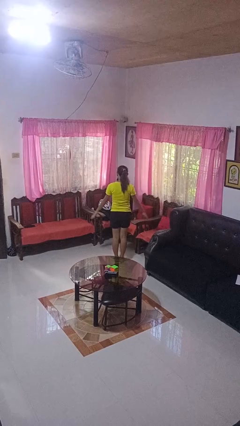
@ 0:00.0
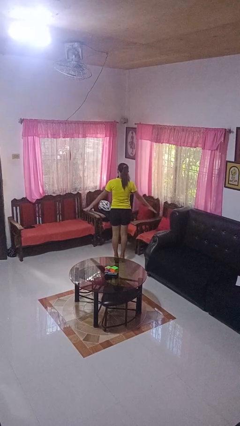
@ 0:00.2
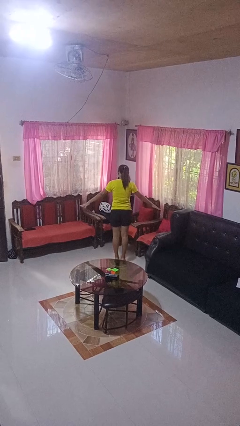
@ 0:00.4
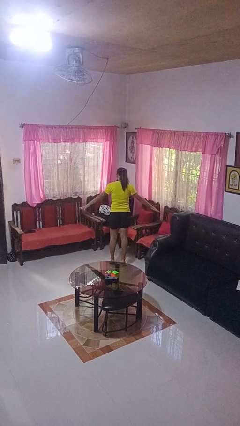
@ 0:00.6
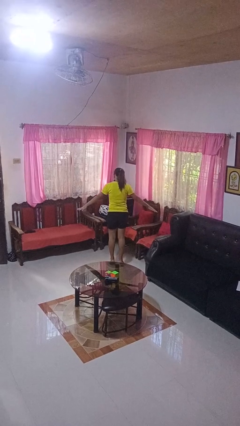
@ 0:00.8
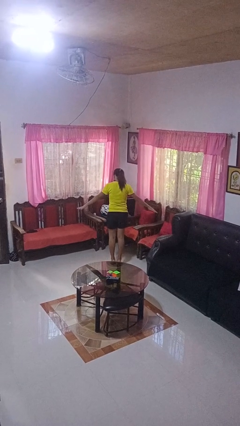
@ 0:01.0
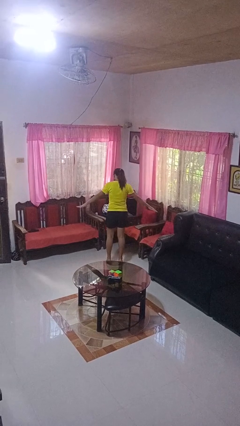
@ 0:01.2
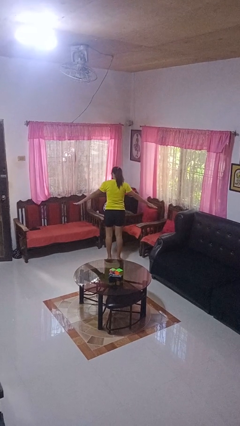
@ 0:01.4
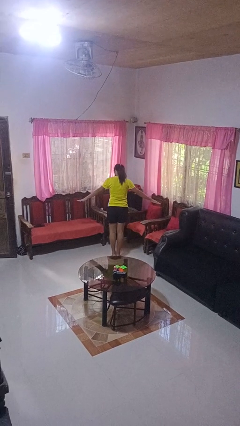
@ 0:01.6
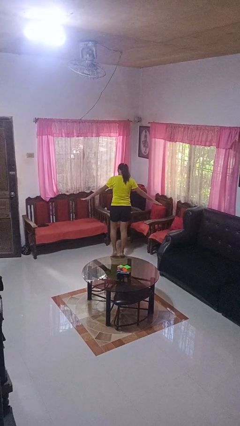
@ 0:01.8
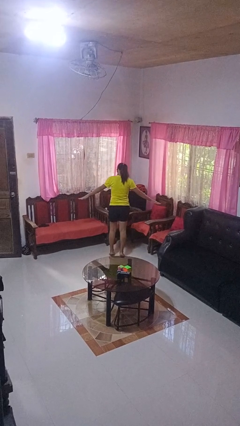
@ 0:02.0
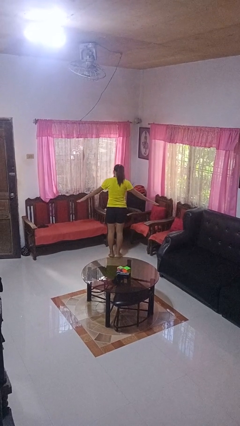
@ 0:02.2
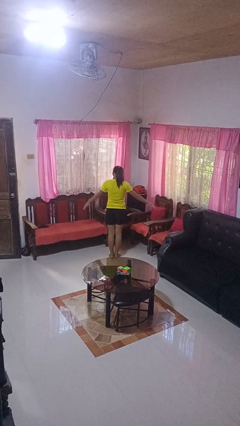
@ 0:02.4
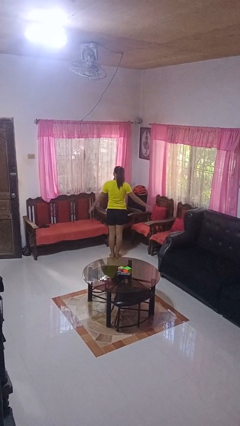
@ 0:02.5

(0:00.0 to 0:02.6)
person walks tiptoe

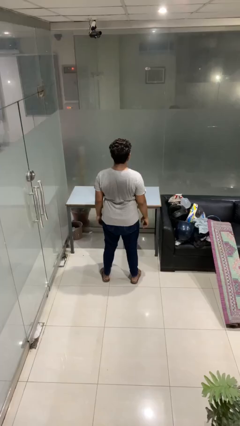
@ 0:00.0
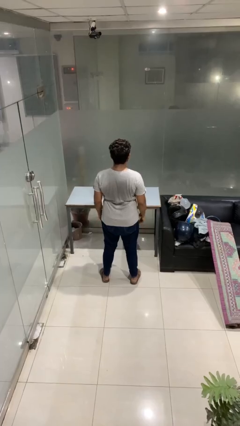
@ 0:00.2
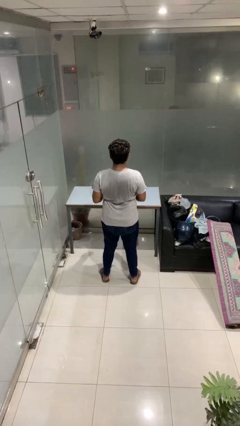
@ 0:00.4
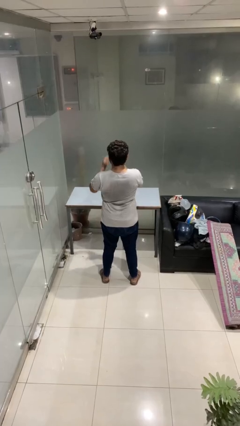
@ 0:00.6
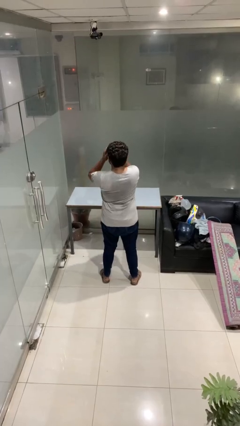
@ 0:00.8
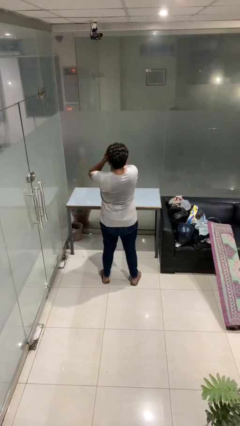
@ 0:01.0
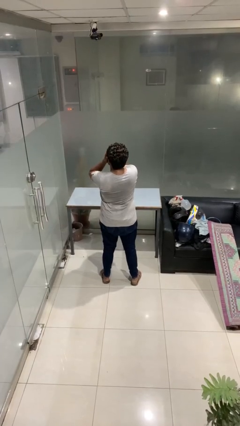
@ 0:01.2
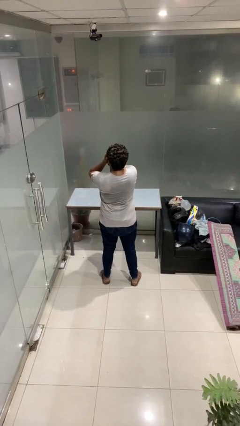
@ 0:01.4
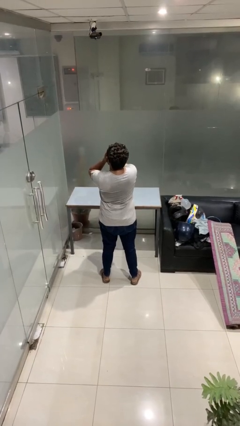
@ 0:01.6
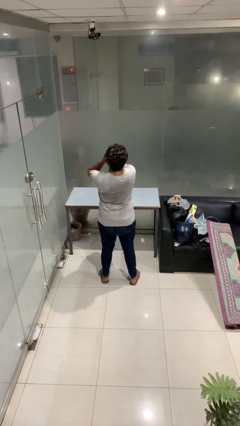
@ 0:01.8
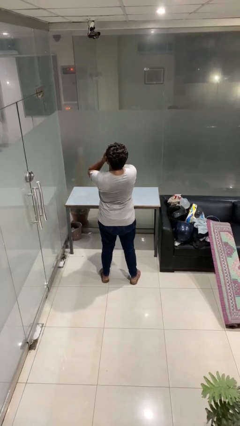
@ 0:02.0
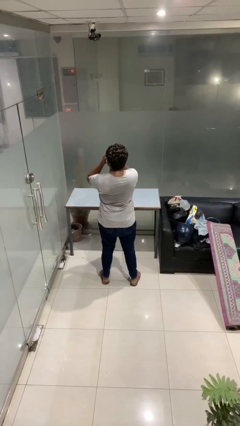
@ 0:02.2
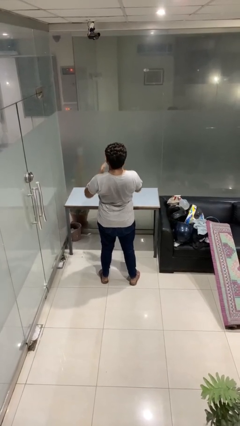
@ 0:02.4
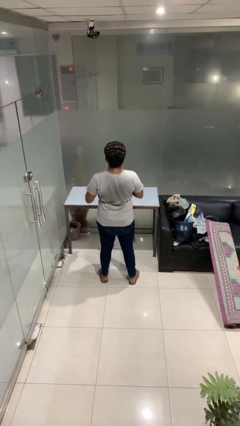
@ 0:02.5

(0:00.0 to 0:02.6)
person covers face with hands

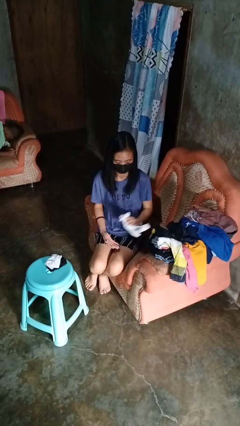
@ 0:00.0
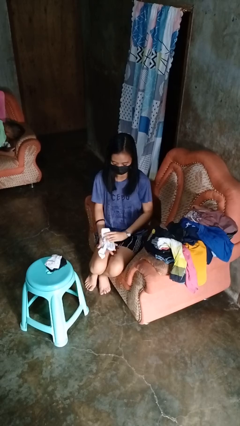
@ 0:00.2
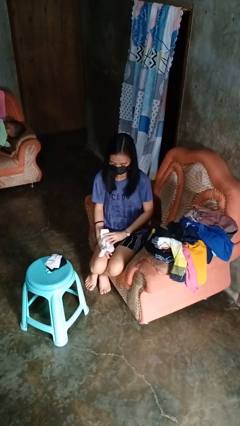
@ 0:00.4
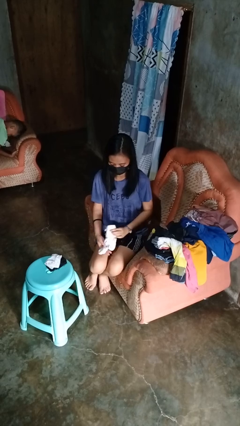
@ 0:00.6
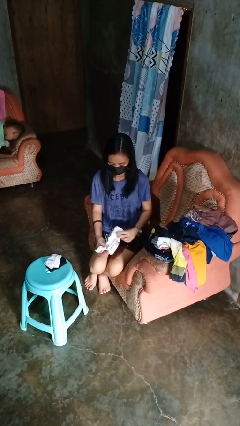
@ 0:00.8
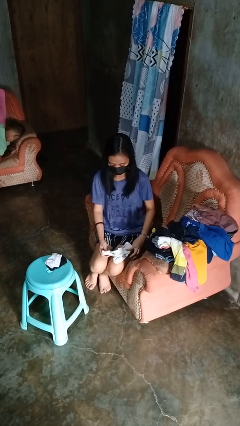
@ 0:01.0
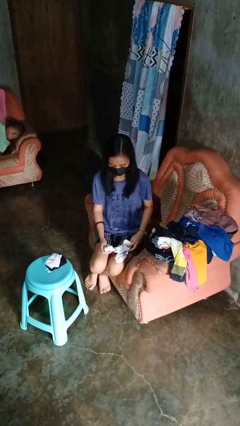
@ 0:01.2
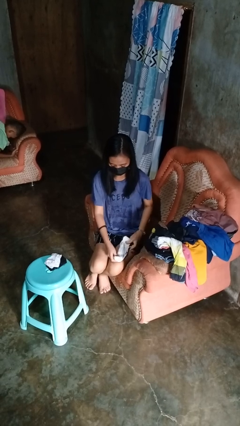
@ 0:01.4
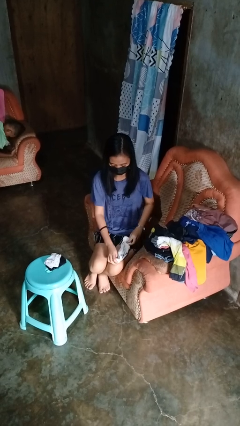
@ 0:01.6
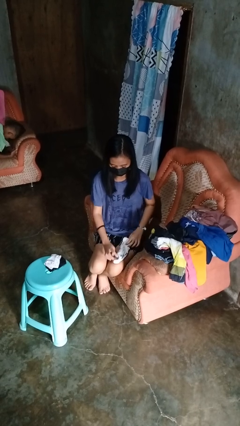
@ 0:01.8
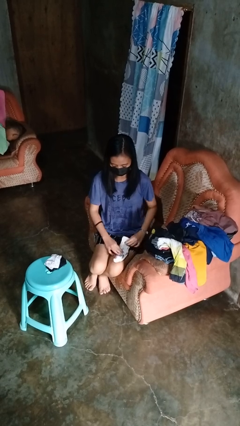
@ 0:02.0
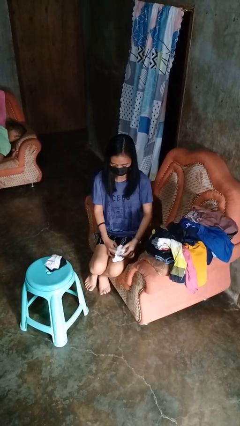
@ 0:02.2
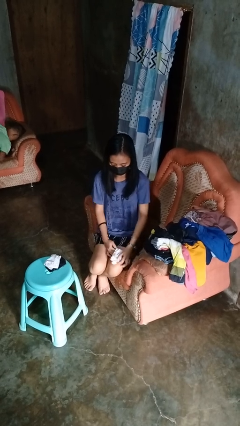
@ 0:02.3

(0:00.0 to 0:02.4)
person folds socks

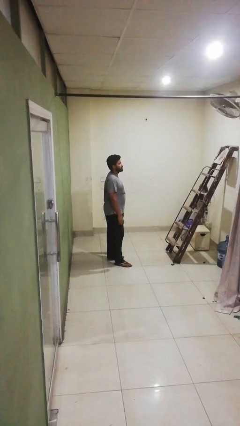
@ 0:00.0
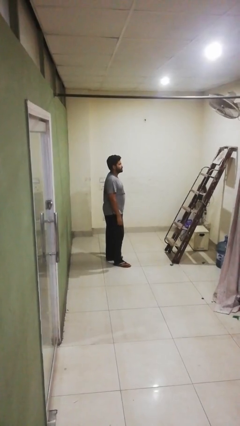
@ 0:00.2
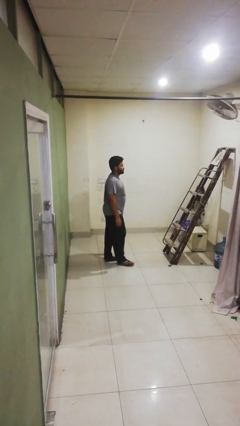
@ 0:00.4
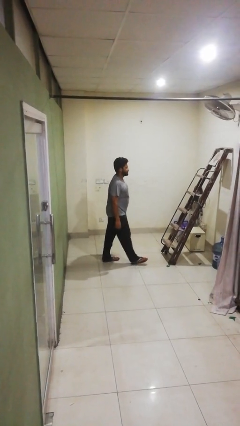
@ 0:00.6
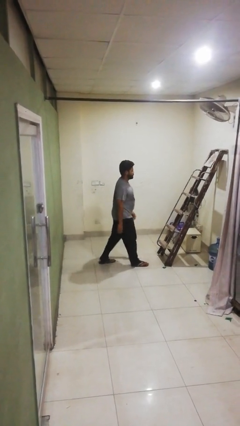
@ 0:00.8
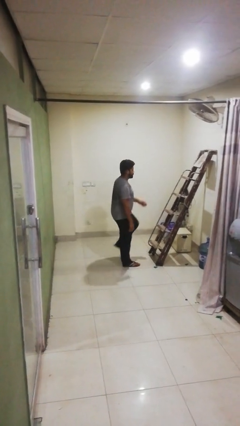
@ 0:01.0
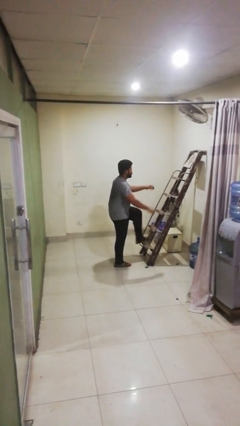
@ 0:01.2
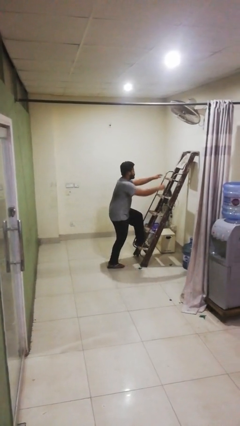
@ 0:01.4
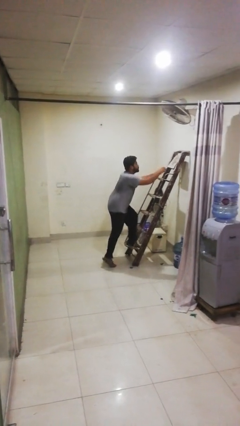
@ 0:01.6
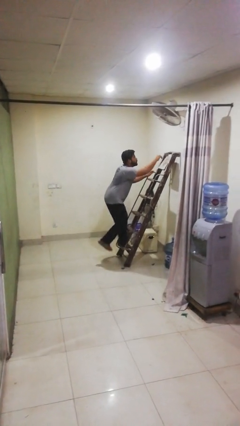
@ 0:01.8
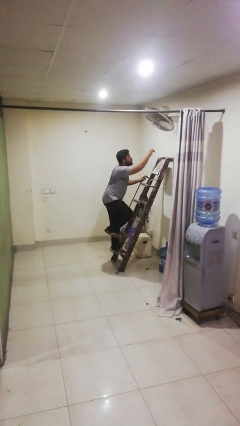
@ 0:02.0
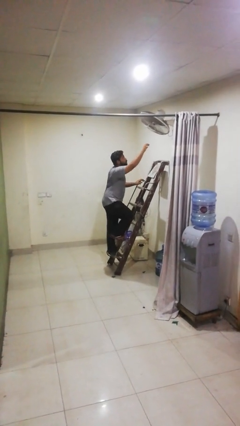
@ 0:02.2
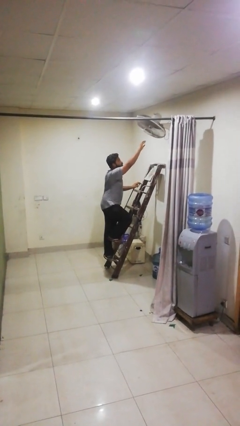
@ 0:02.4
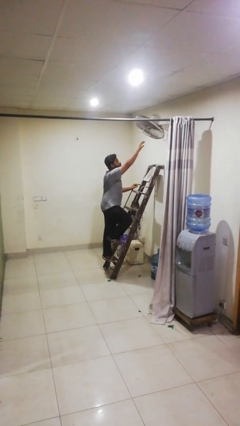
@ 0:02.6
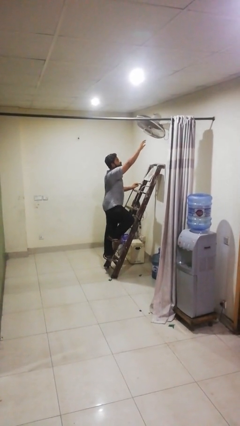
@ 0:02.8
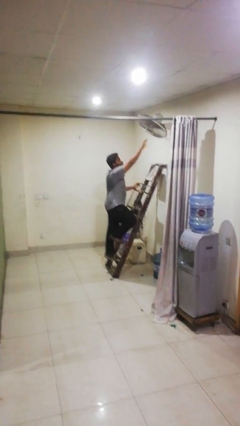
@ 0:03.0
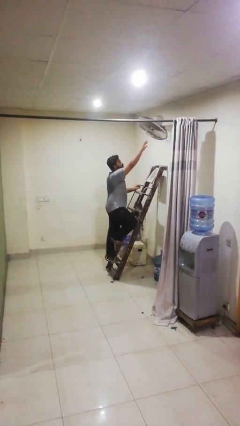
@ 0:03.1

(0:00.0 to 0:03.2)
person climbs up ladder

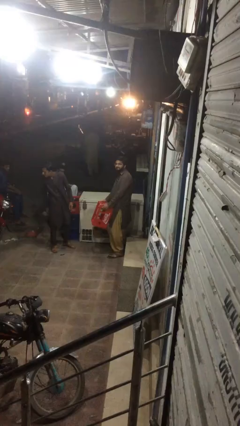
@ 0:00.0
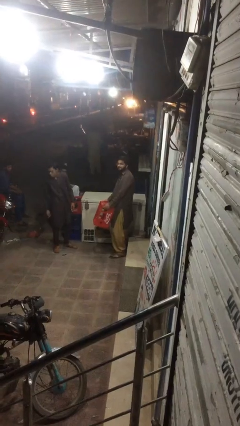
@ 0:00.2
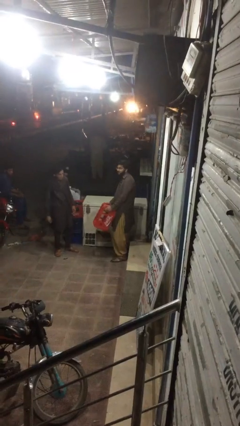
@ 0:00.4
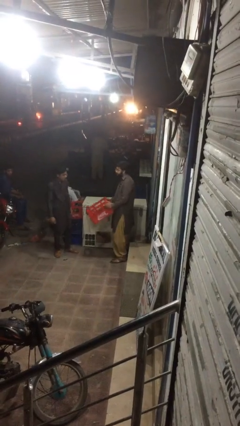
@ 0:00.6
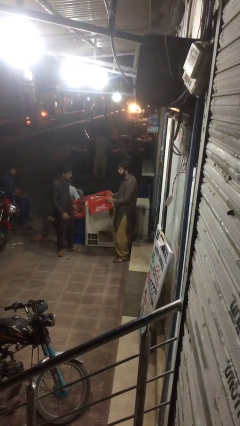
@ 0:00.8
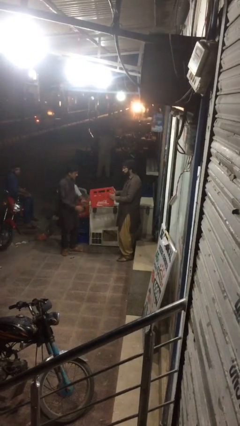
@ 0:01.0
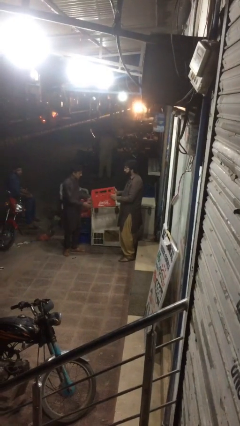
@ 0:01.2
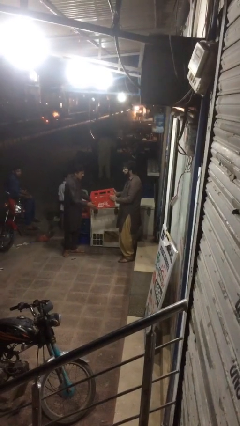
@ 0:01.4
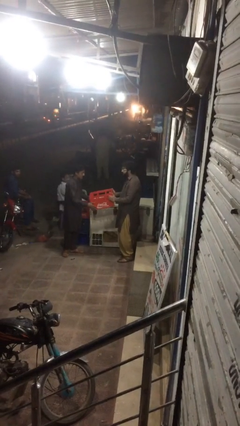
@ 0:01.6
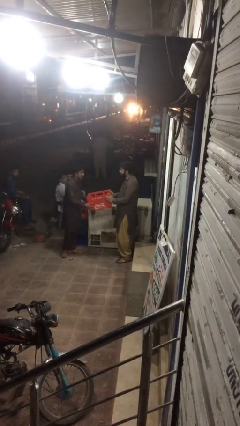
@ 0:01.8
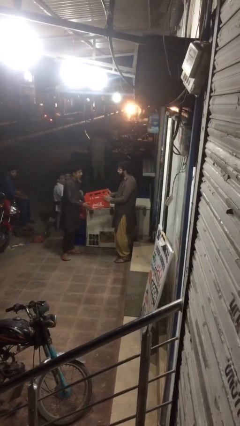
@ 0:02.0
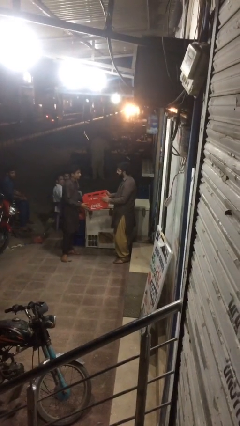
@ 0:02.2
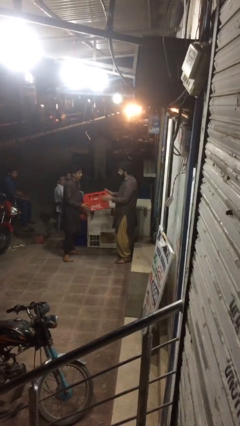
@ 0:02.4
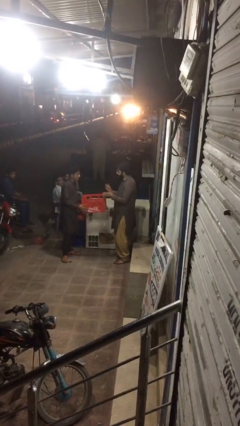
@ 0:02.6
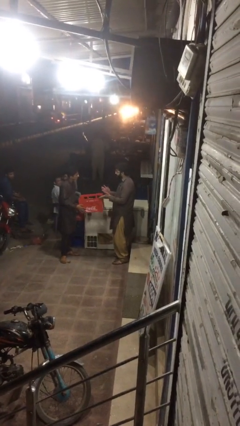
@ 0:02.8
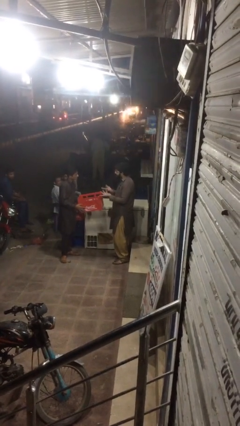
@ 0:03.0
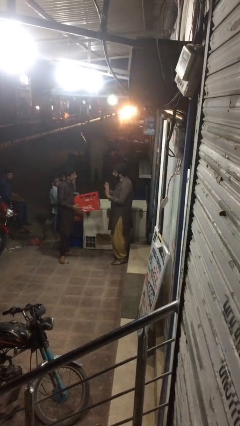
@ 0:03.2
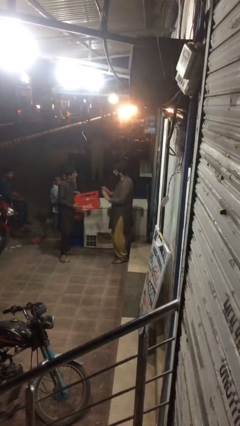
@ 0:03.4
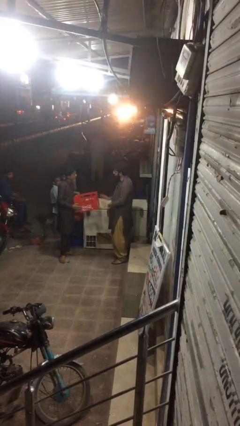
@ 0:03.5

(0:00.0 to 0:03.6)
person transfers object to person

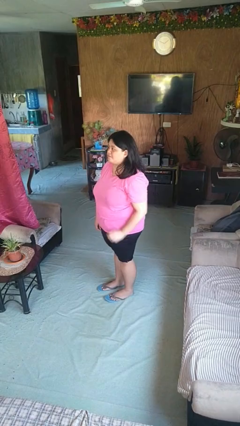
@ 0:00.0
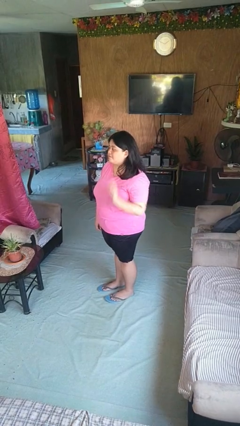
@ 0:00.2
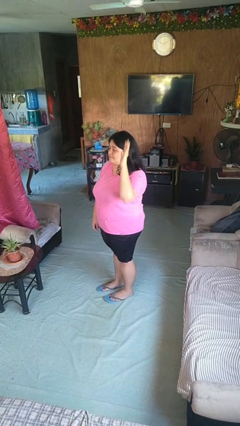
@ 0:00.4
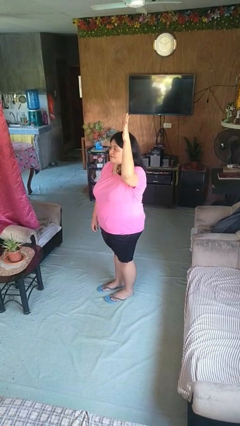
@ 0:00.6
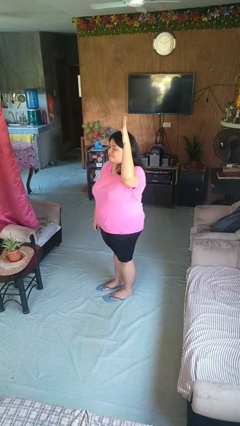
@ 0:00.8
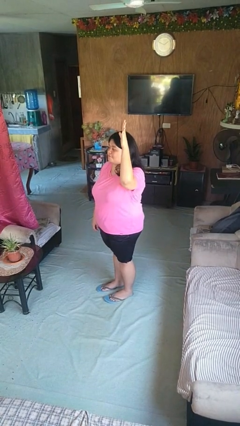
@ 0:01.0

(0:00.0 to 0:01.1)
person gestures raise hand

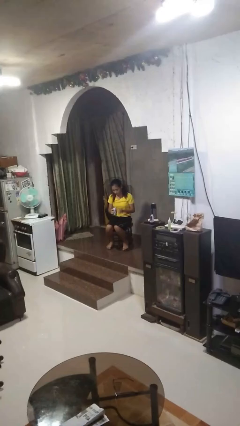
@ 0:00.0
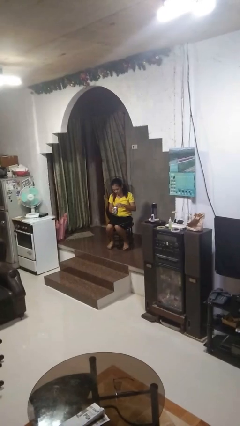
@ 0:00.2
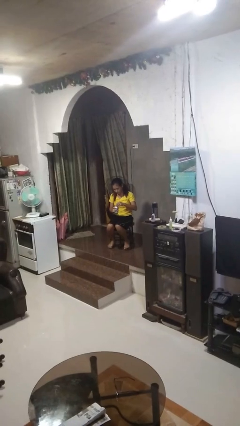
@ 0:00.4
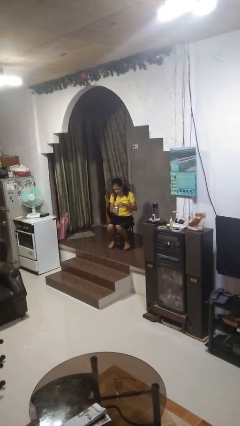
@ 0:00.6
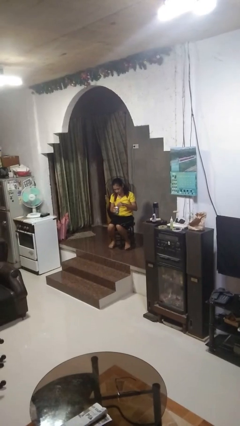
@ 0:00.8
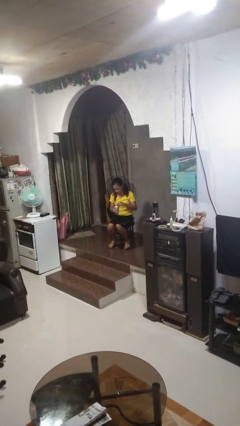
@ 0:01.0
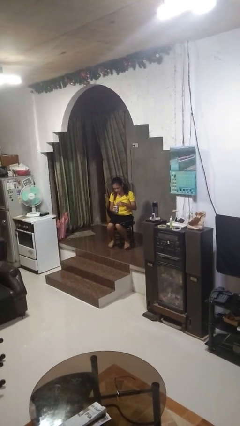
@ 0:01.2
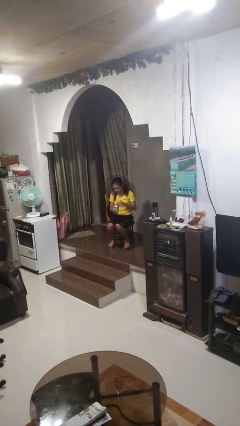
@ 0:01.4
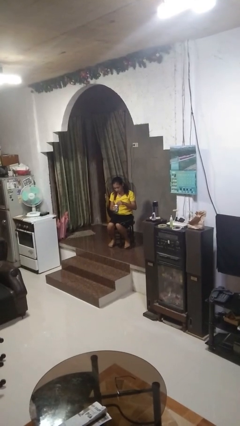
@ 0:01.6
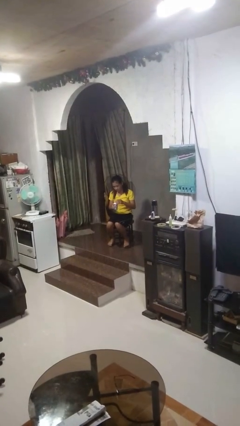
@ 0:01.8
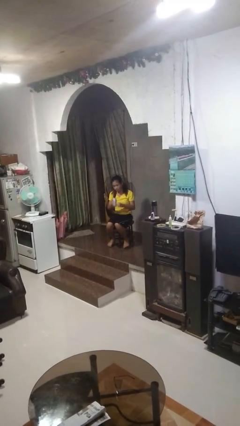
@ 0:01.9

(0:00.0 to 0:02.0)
person opens beverage can
